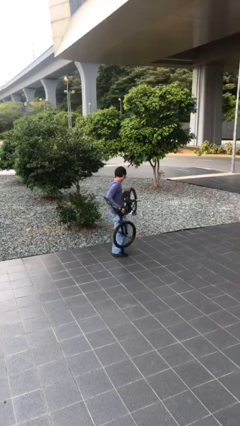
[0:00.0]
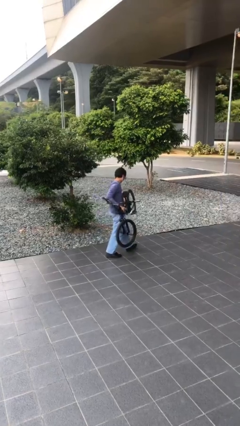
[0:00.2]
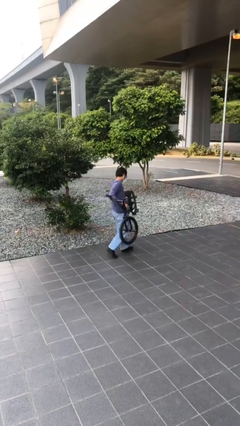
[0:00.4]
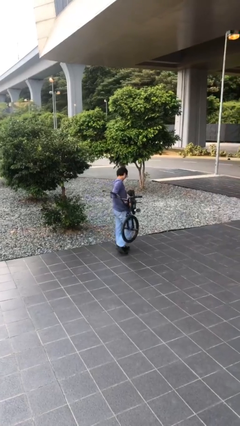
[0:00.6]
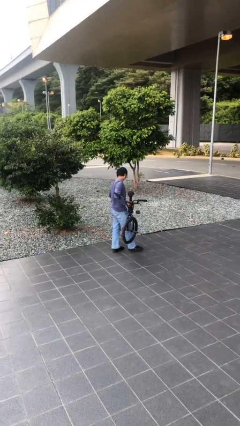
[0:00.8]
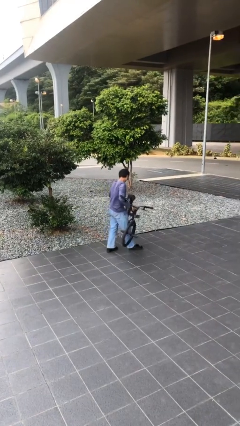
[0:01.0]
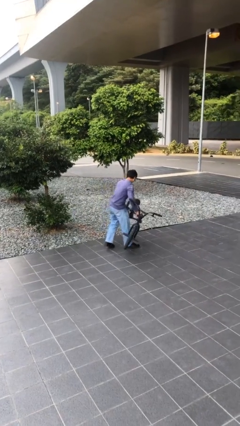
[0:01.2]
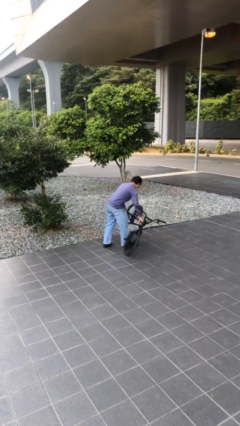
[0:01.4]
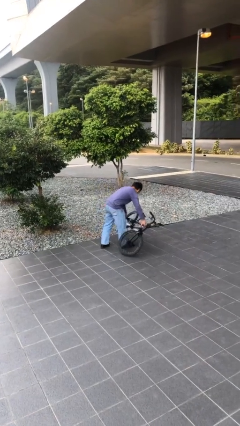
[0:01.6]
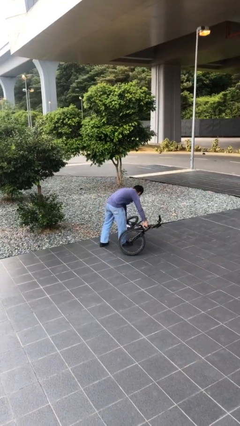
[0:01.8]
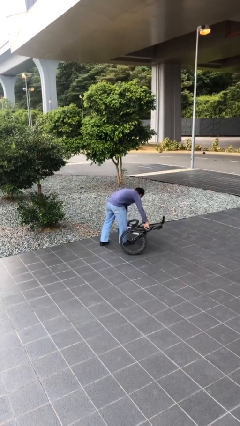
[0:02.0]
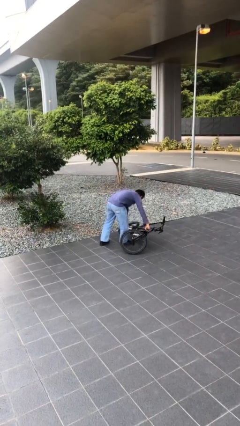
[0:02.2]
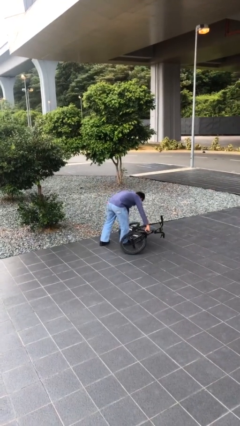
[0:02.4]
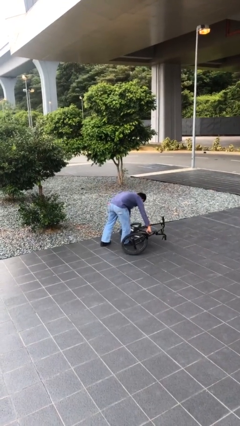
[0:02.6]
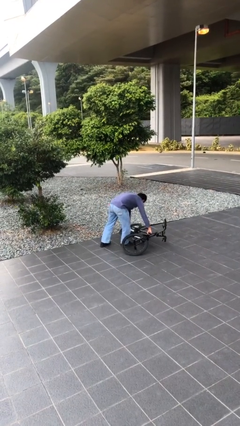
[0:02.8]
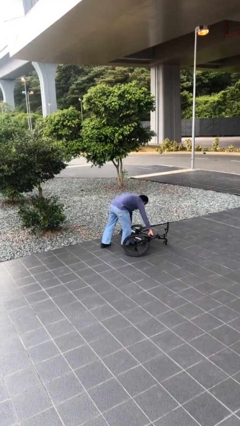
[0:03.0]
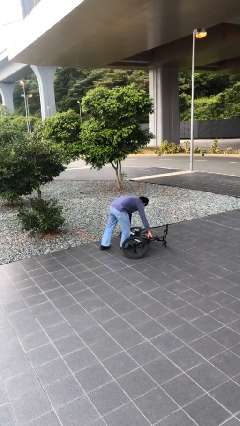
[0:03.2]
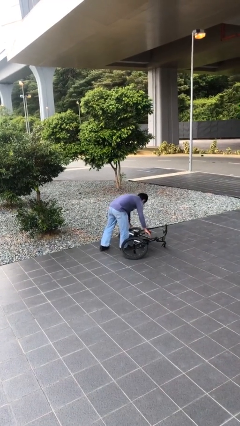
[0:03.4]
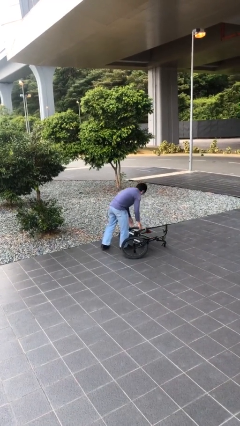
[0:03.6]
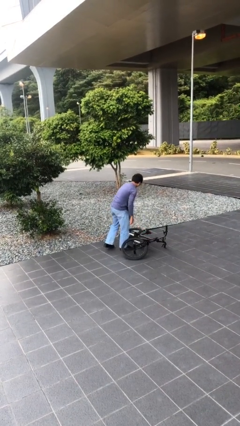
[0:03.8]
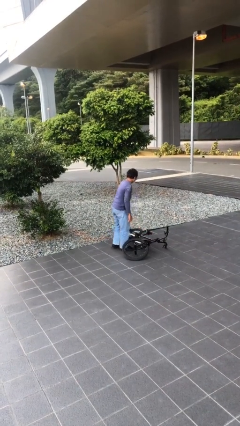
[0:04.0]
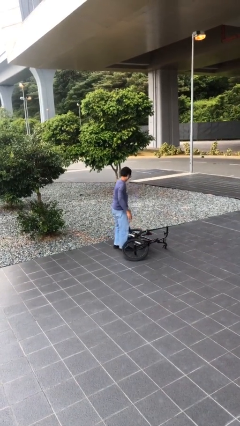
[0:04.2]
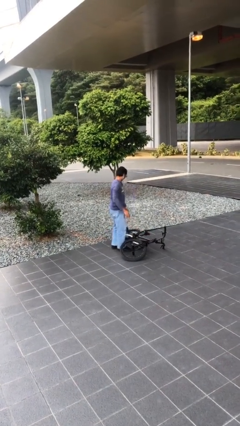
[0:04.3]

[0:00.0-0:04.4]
person puts down object on floor

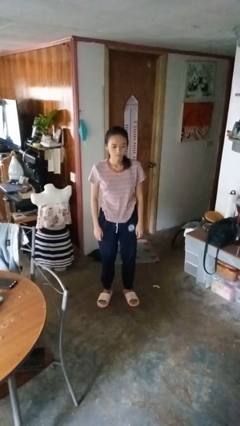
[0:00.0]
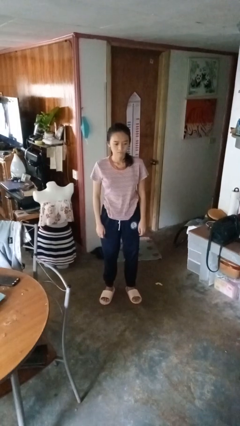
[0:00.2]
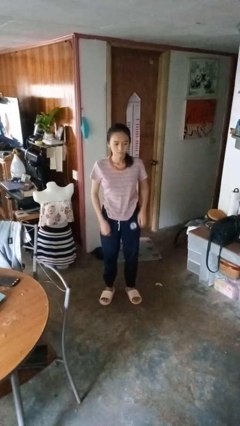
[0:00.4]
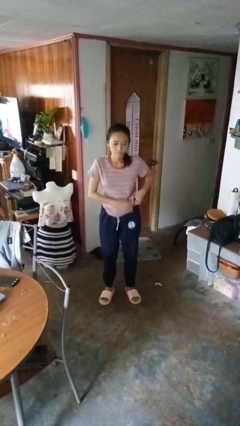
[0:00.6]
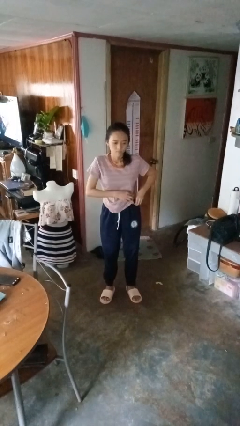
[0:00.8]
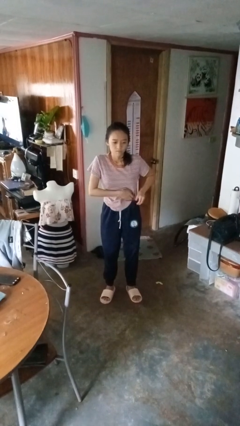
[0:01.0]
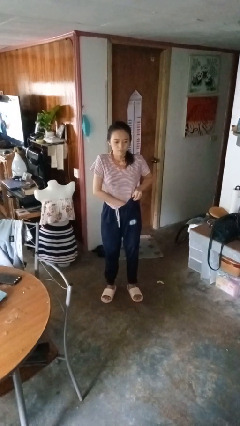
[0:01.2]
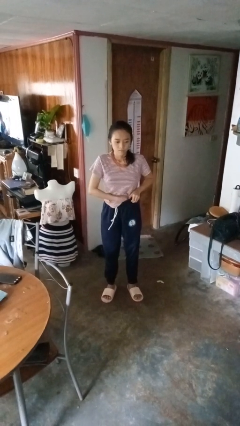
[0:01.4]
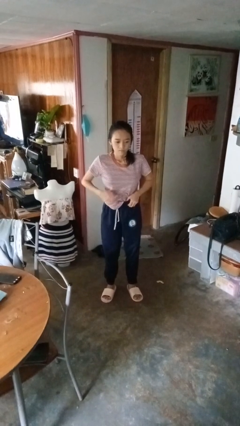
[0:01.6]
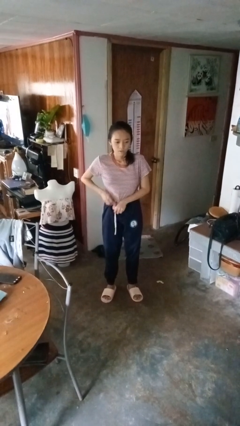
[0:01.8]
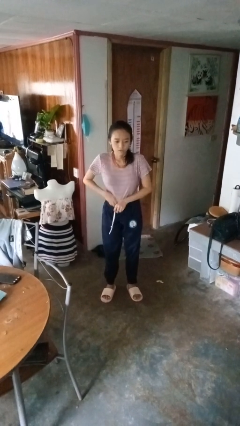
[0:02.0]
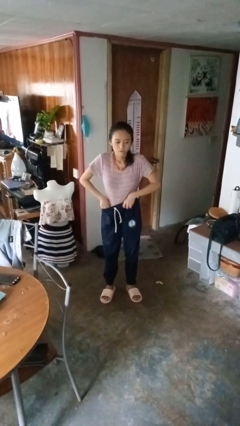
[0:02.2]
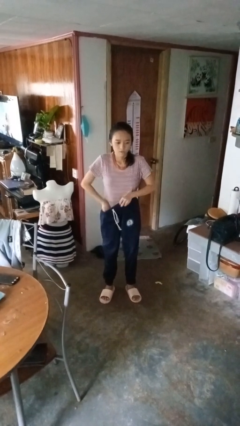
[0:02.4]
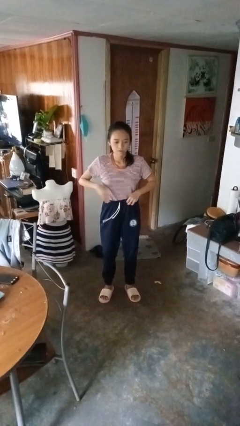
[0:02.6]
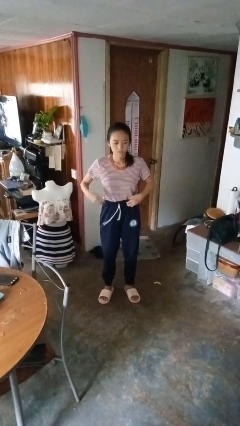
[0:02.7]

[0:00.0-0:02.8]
person tucks in shirt

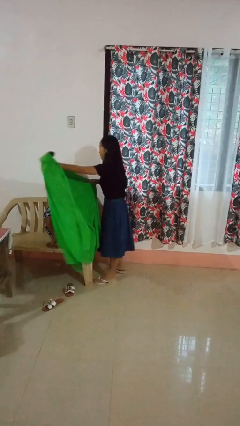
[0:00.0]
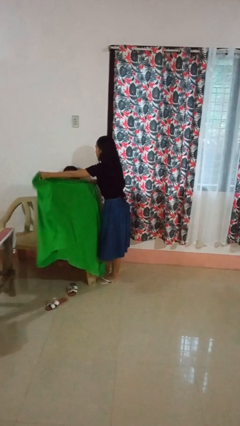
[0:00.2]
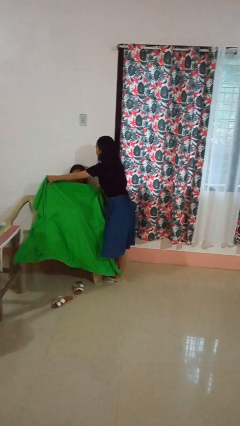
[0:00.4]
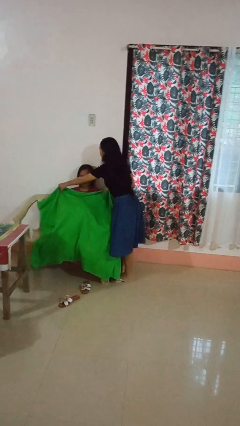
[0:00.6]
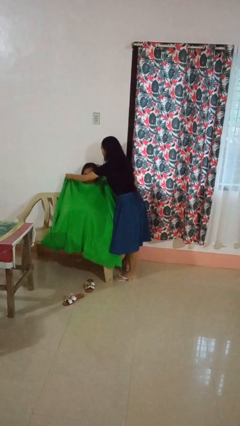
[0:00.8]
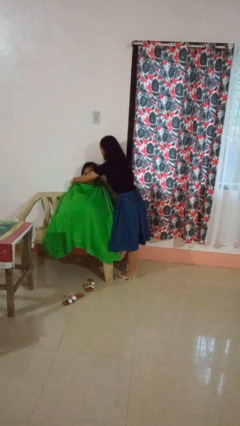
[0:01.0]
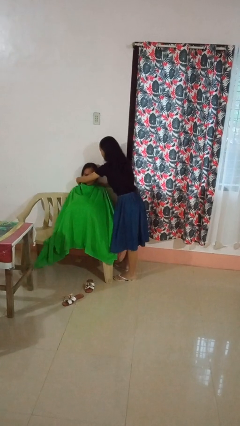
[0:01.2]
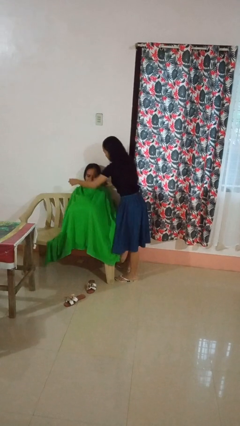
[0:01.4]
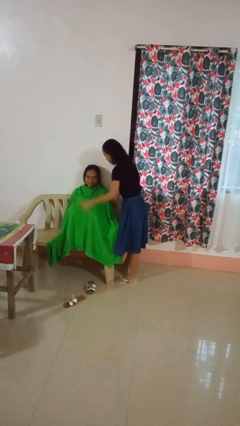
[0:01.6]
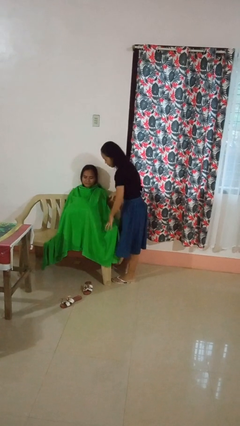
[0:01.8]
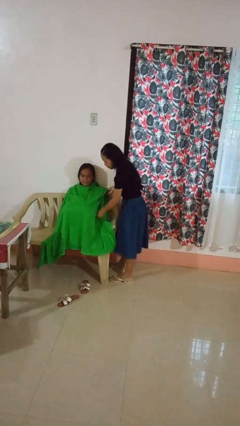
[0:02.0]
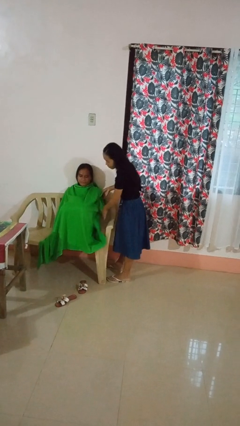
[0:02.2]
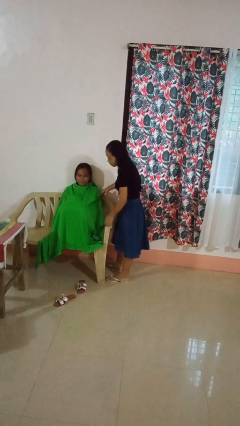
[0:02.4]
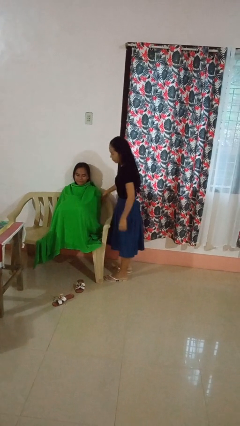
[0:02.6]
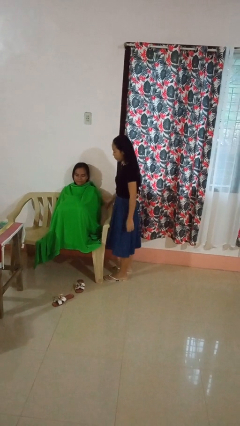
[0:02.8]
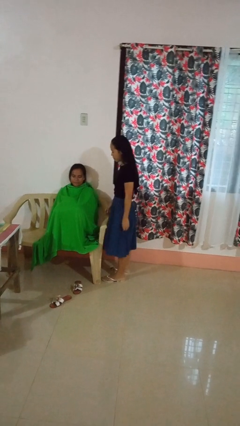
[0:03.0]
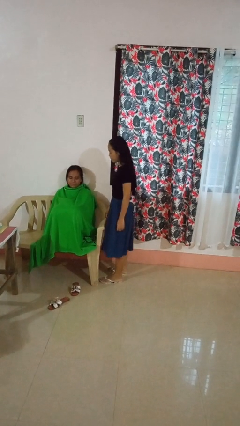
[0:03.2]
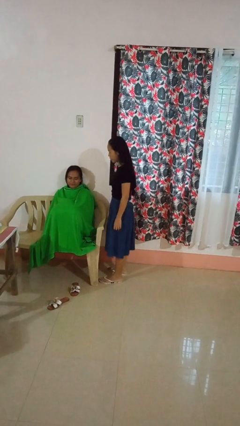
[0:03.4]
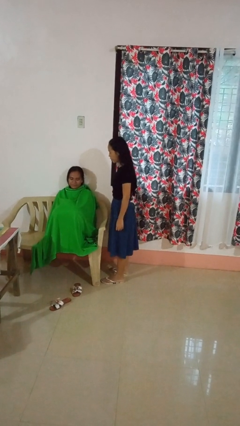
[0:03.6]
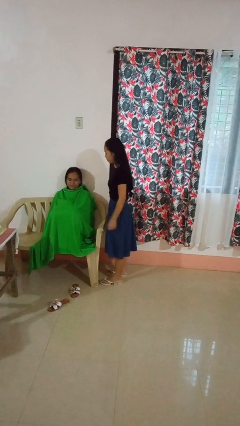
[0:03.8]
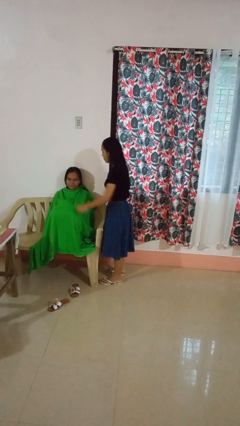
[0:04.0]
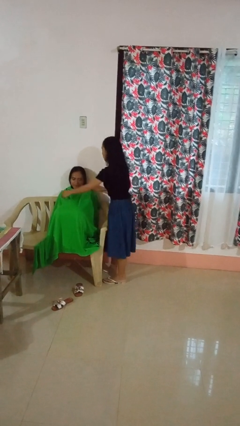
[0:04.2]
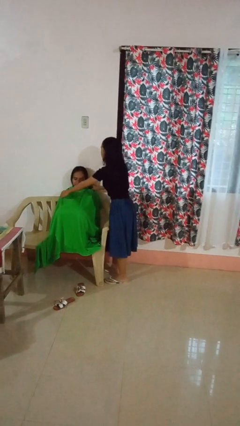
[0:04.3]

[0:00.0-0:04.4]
person covers friend with blanket

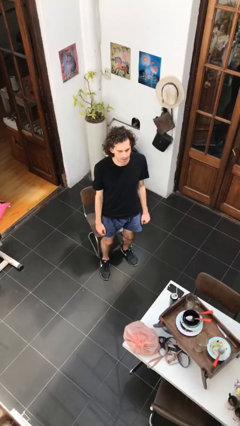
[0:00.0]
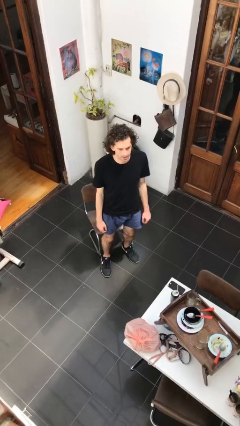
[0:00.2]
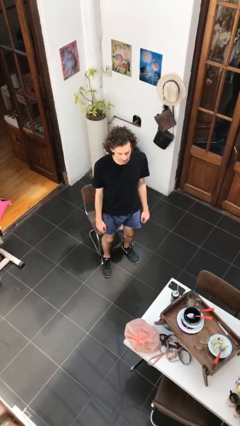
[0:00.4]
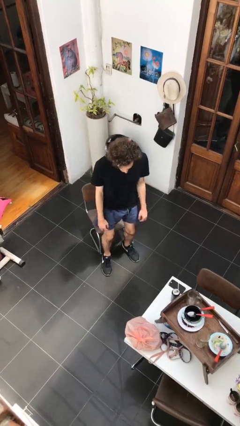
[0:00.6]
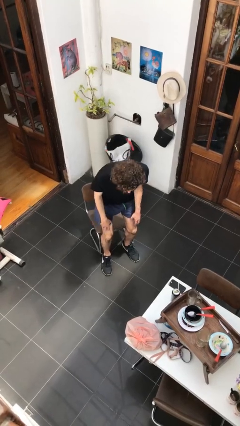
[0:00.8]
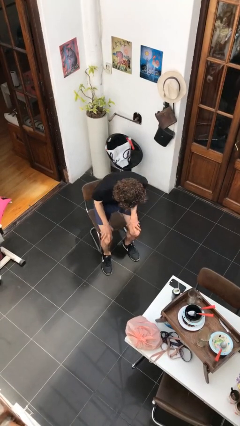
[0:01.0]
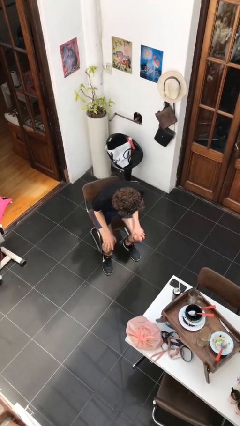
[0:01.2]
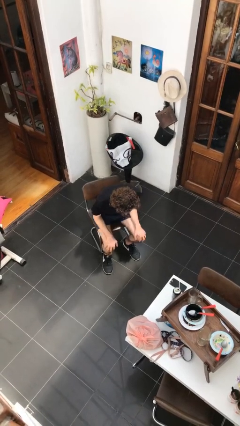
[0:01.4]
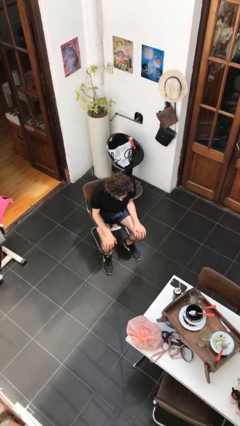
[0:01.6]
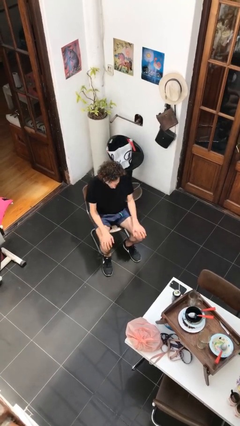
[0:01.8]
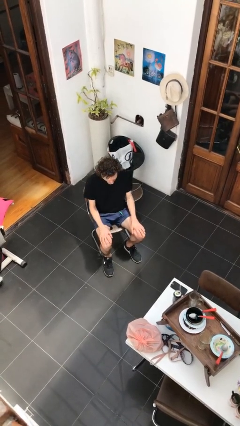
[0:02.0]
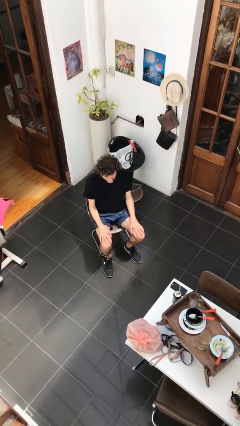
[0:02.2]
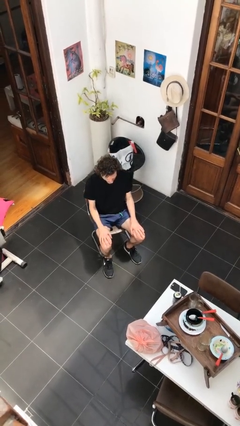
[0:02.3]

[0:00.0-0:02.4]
person sits down

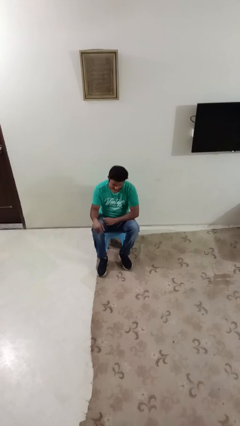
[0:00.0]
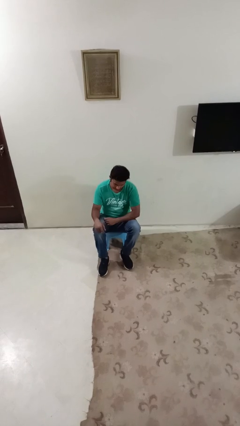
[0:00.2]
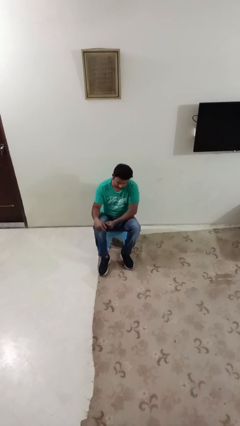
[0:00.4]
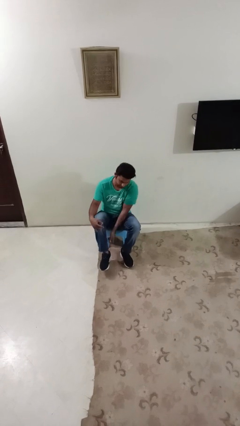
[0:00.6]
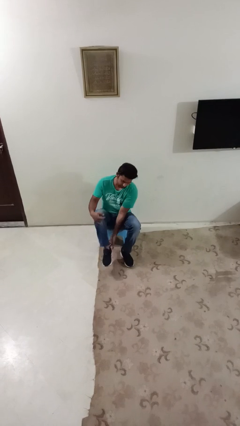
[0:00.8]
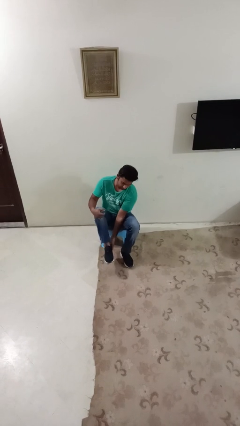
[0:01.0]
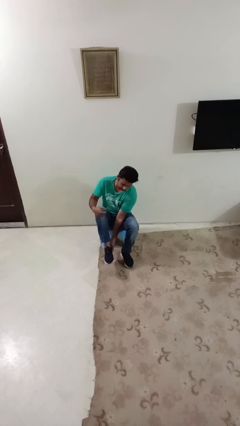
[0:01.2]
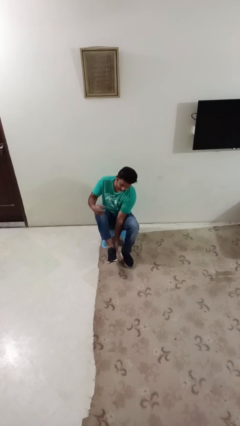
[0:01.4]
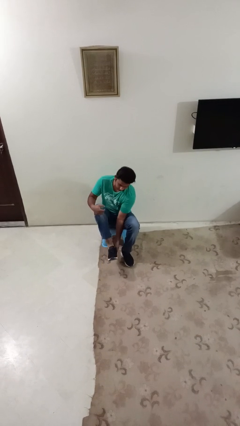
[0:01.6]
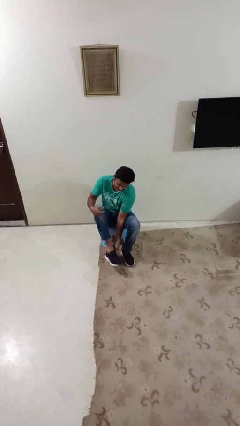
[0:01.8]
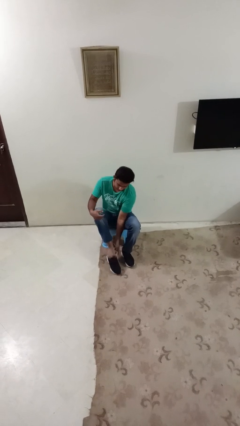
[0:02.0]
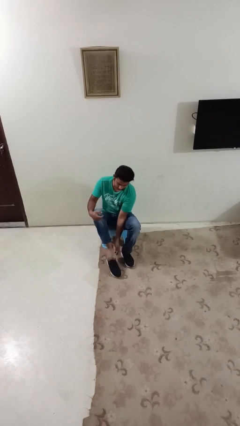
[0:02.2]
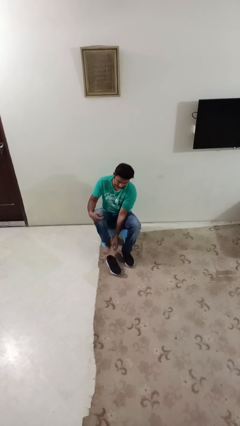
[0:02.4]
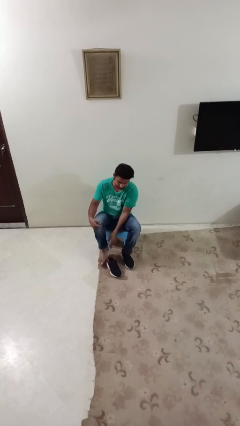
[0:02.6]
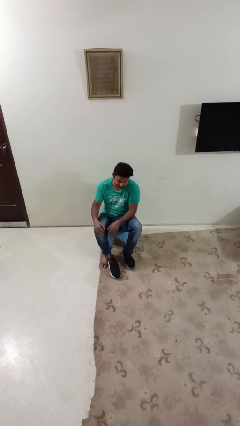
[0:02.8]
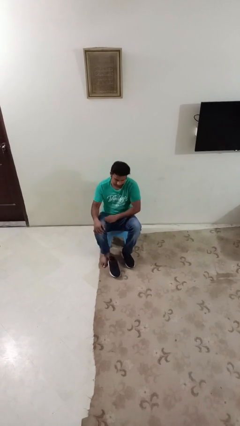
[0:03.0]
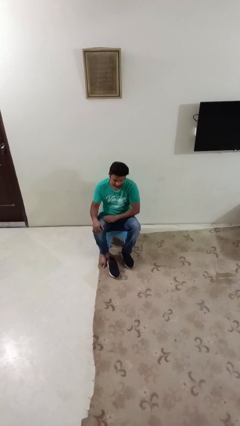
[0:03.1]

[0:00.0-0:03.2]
person takes off shoes

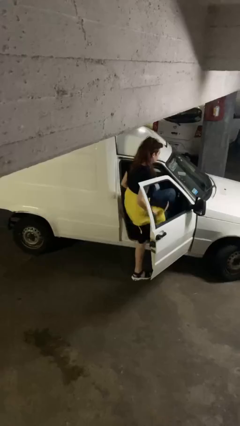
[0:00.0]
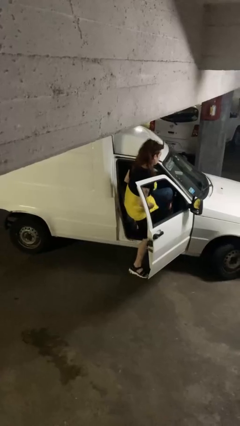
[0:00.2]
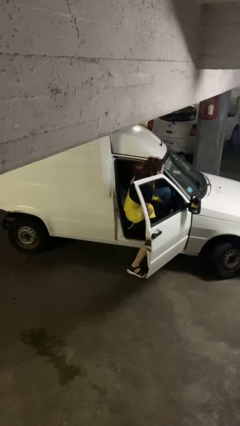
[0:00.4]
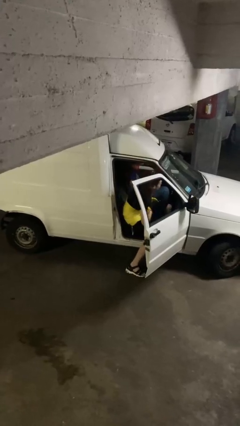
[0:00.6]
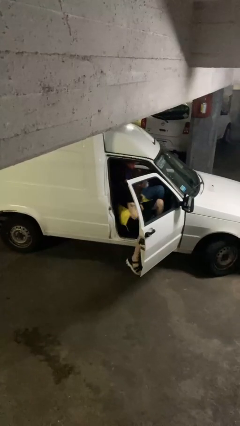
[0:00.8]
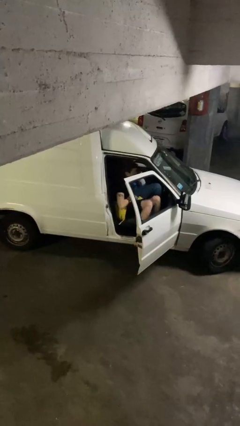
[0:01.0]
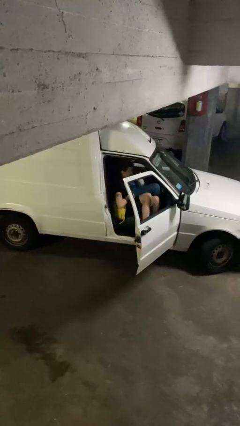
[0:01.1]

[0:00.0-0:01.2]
person enters car
